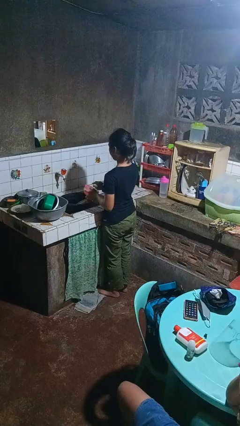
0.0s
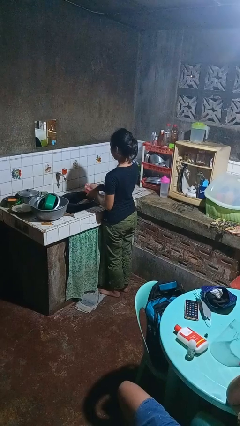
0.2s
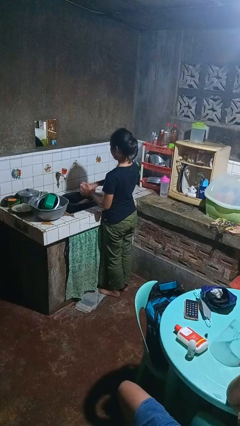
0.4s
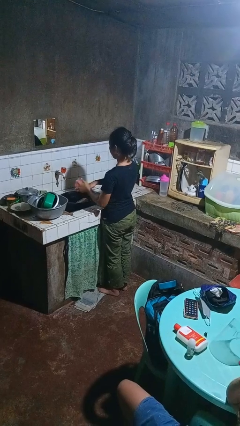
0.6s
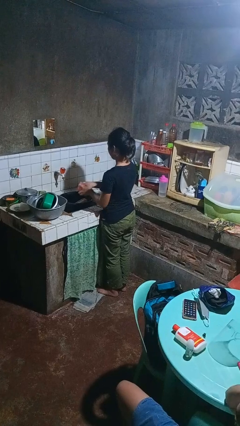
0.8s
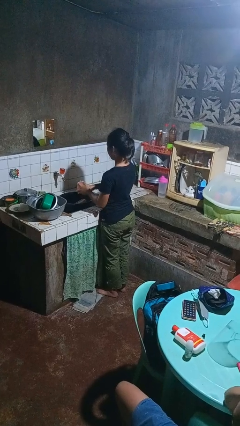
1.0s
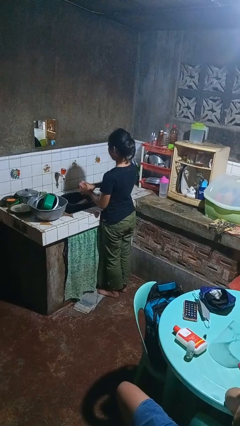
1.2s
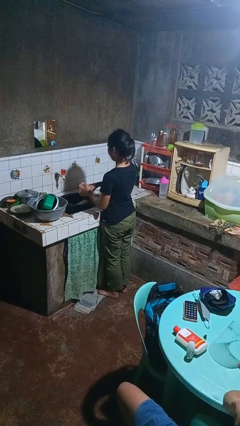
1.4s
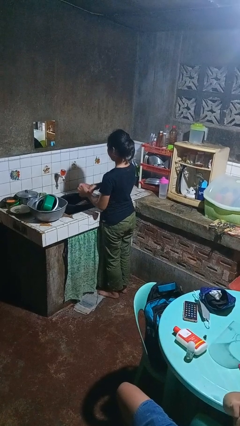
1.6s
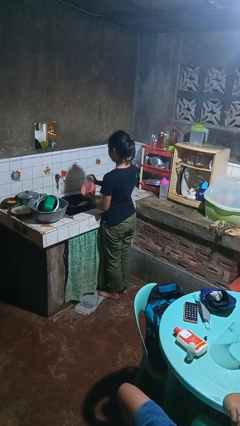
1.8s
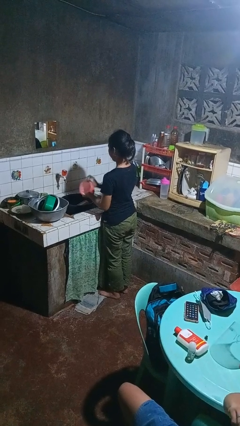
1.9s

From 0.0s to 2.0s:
person washes dish

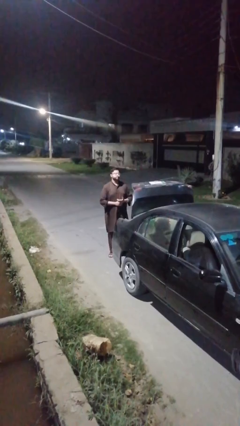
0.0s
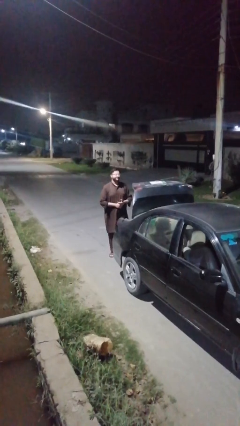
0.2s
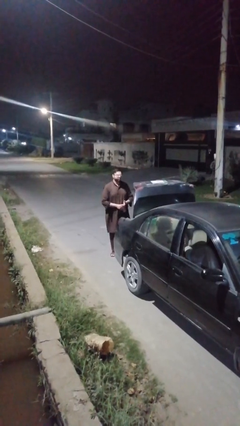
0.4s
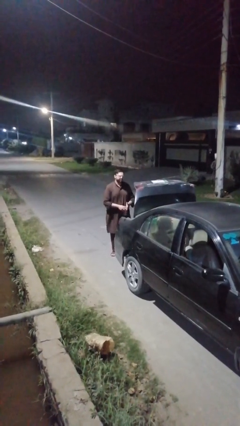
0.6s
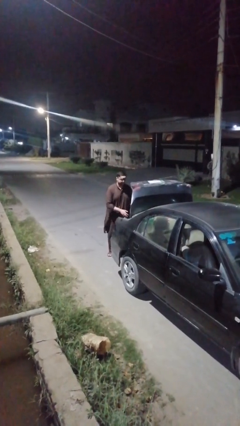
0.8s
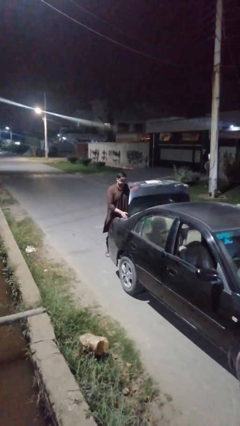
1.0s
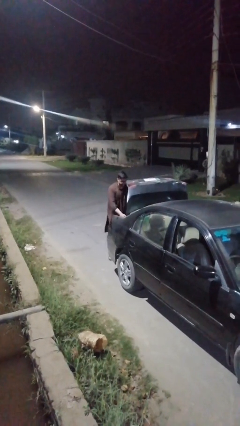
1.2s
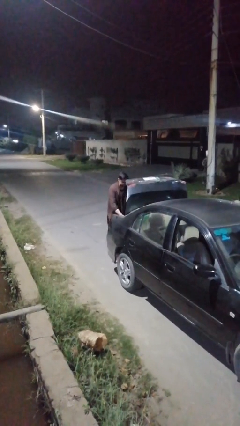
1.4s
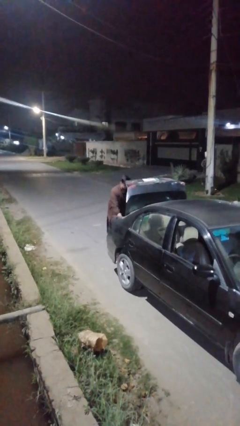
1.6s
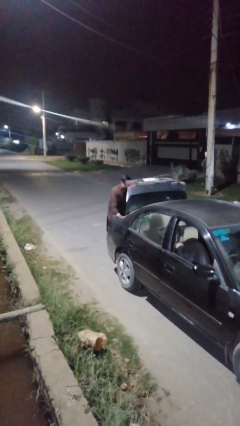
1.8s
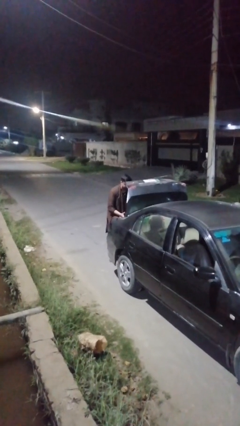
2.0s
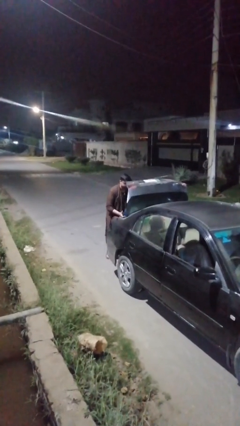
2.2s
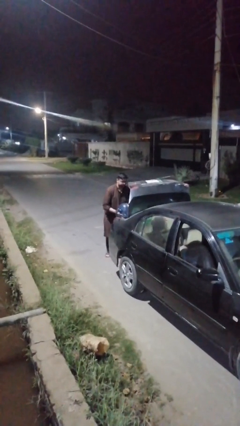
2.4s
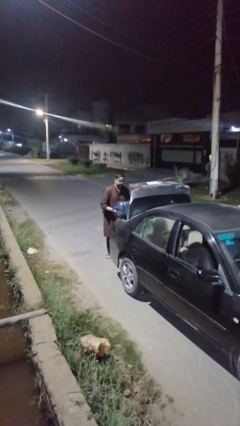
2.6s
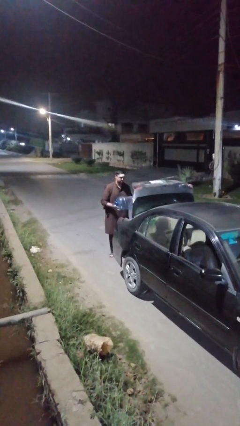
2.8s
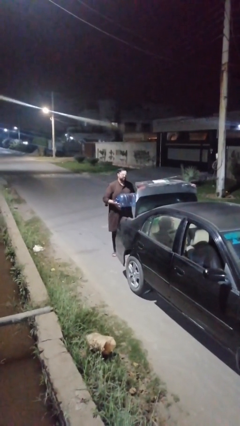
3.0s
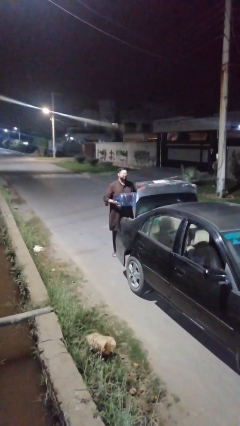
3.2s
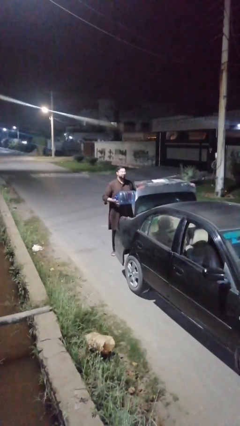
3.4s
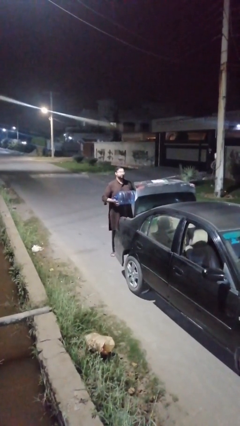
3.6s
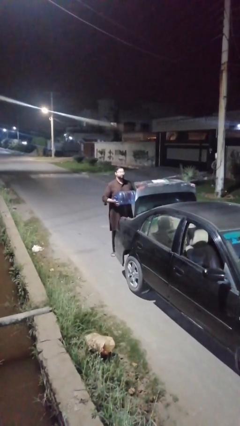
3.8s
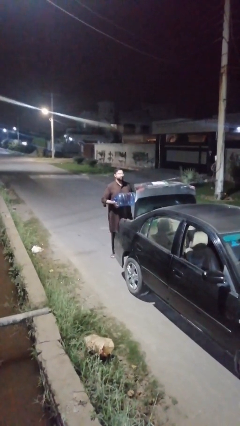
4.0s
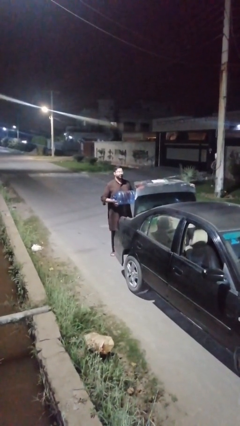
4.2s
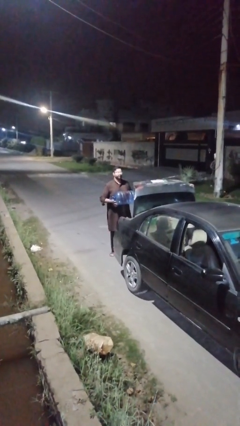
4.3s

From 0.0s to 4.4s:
person unloads car

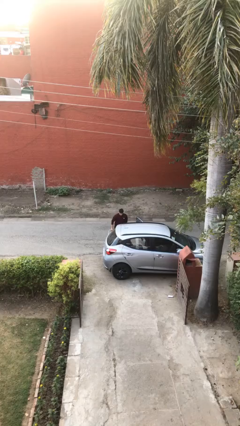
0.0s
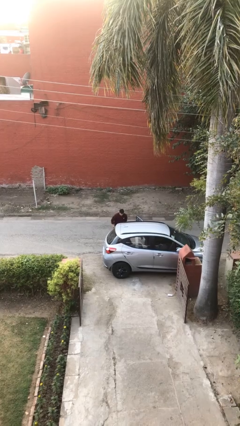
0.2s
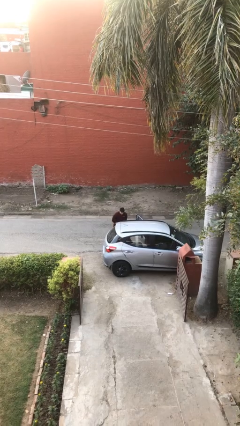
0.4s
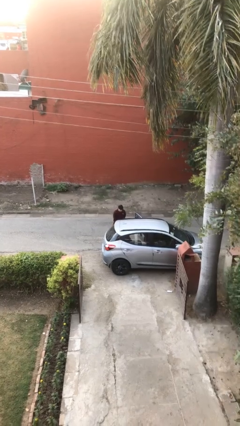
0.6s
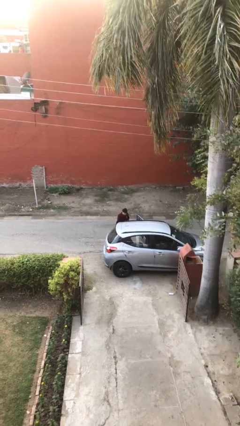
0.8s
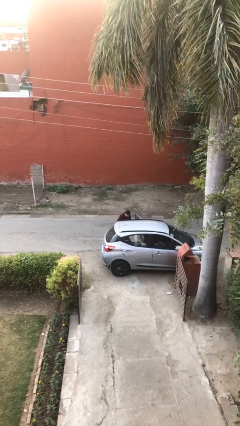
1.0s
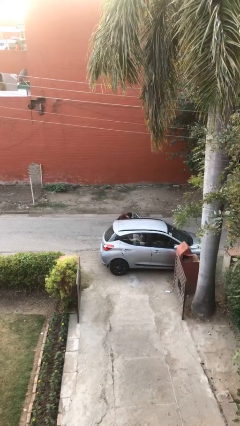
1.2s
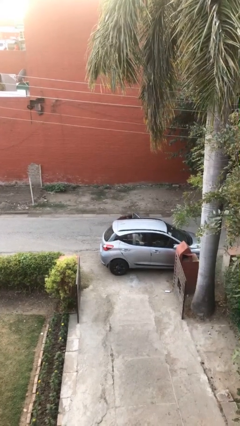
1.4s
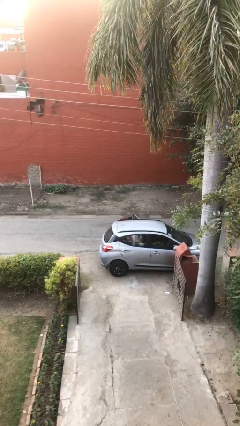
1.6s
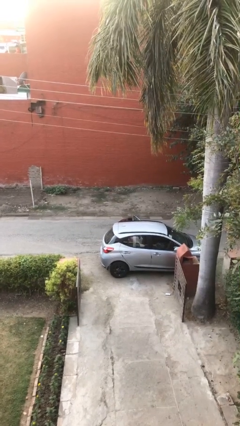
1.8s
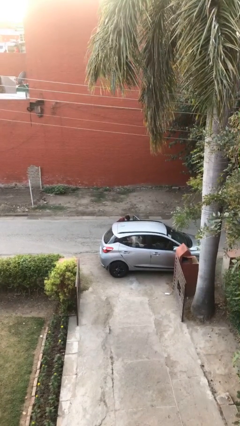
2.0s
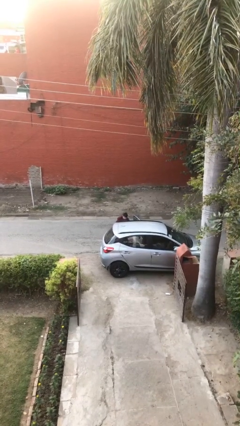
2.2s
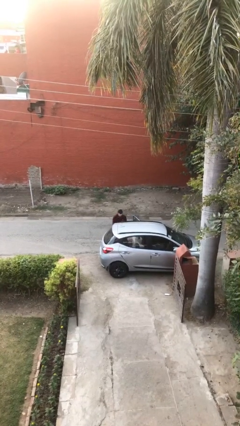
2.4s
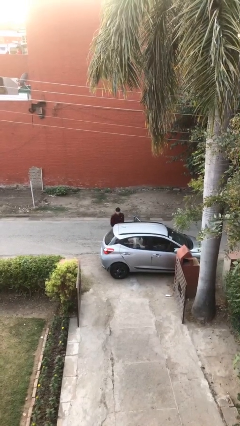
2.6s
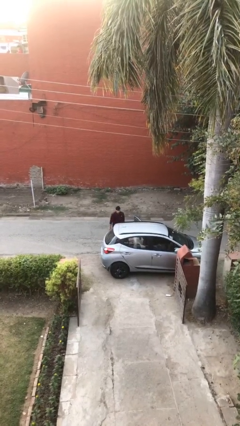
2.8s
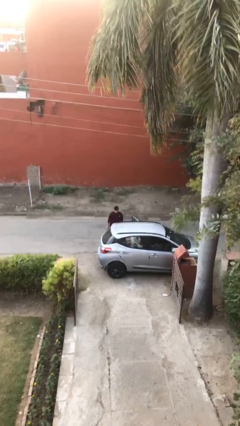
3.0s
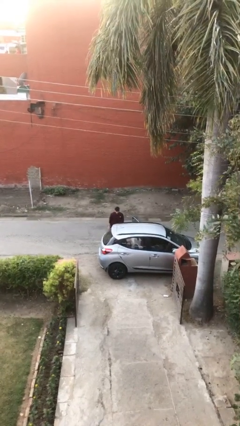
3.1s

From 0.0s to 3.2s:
person loads car

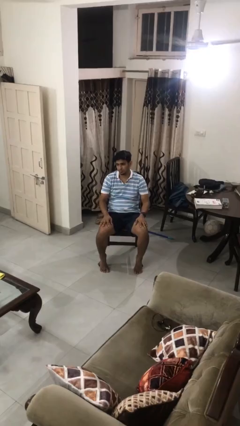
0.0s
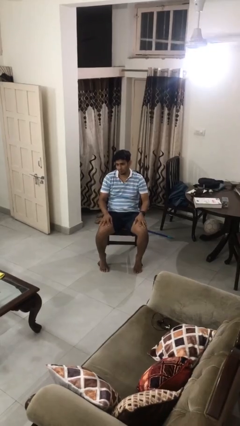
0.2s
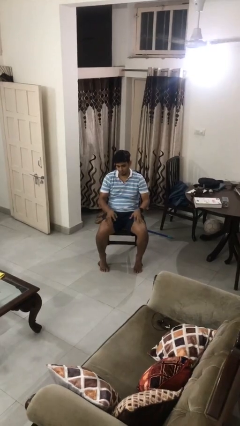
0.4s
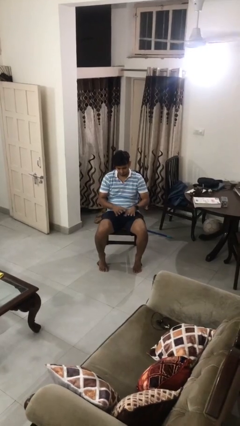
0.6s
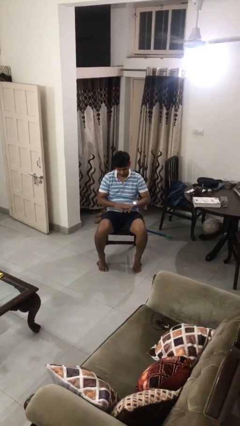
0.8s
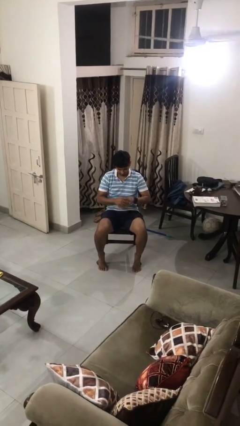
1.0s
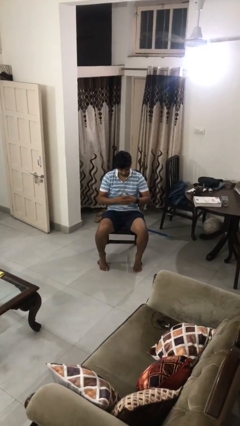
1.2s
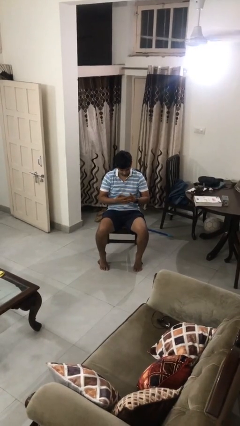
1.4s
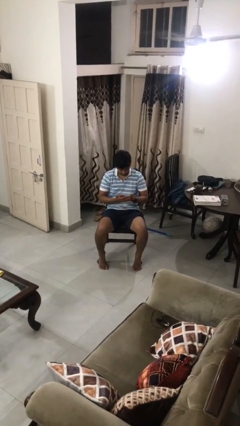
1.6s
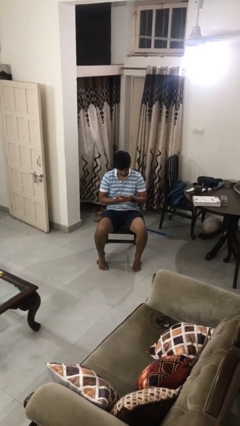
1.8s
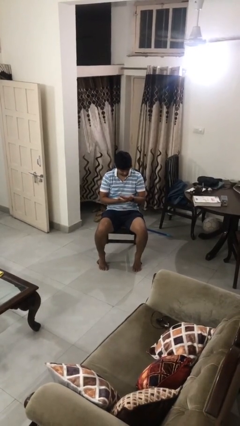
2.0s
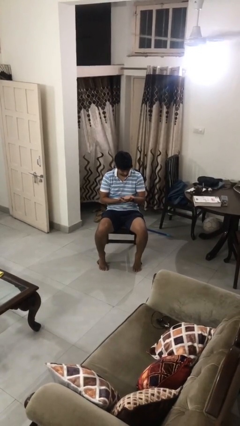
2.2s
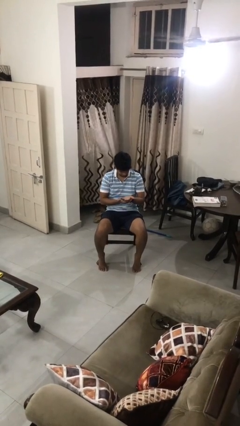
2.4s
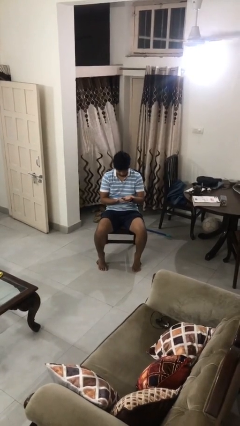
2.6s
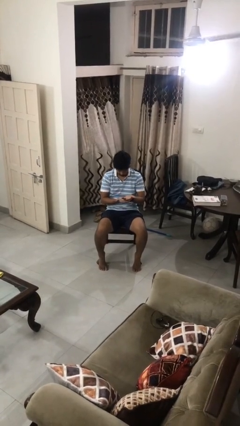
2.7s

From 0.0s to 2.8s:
person looks at hands in lap

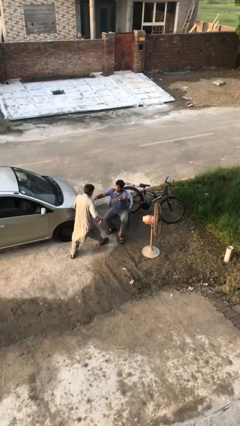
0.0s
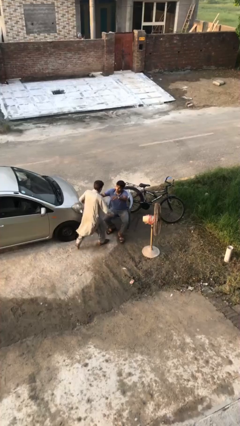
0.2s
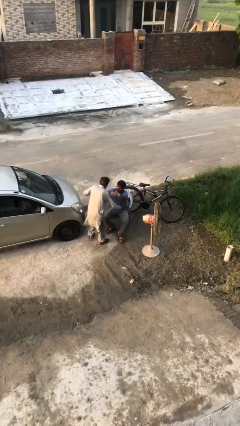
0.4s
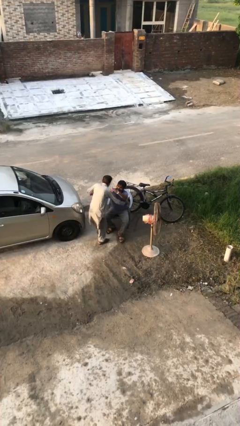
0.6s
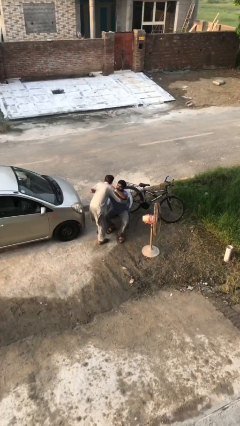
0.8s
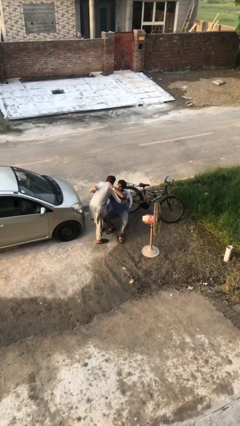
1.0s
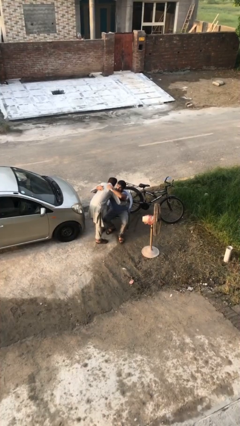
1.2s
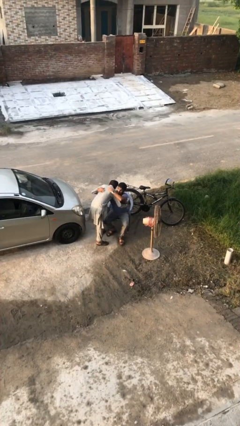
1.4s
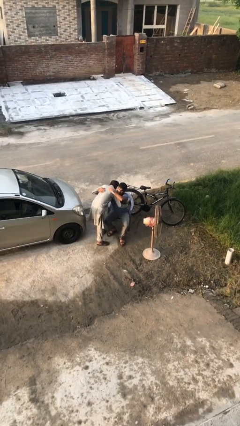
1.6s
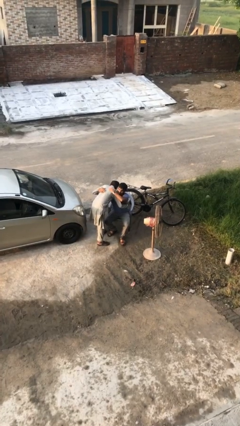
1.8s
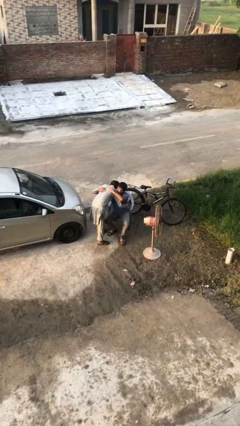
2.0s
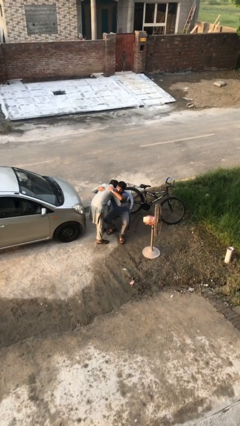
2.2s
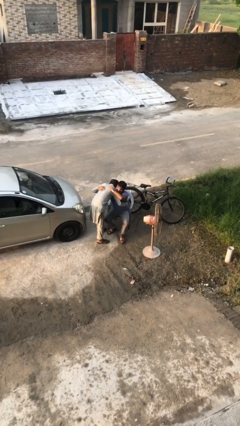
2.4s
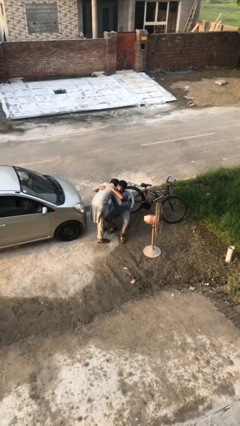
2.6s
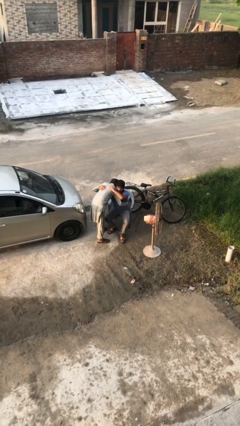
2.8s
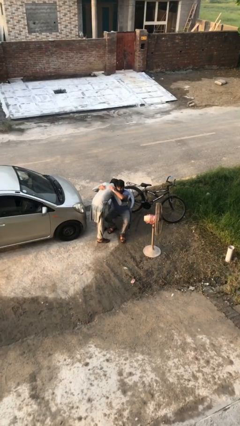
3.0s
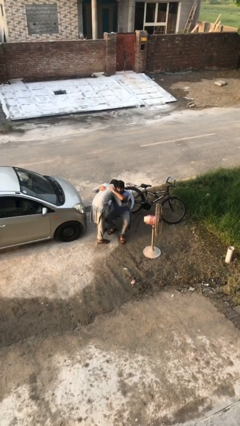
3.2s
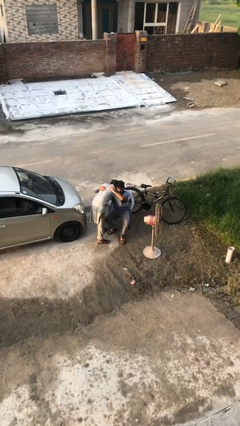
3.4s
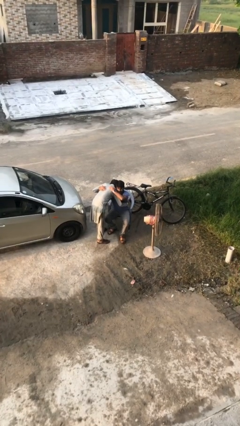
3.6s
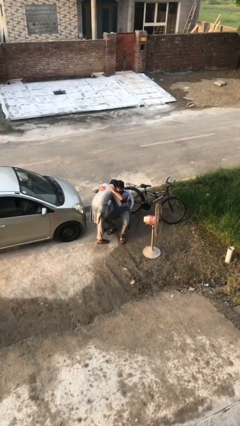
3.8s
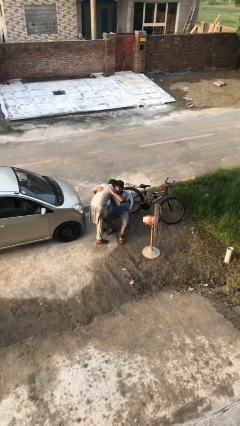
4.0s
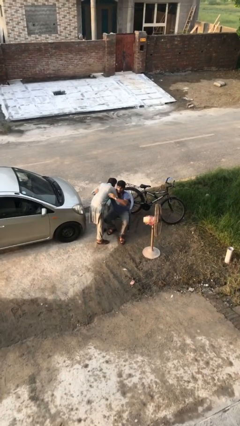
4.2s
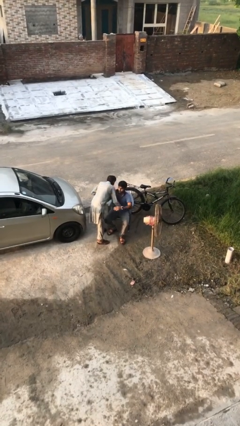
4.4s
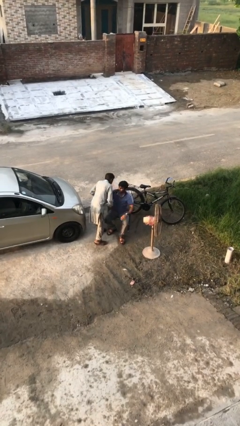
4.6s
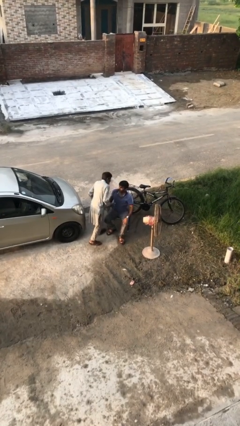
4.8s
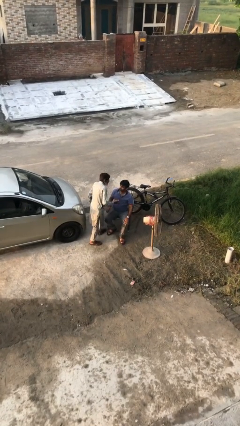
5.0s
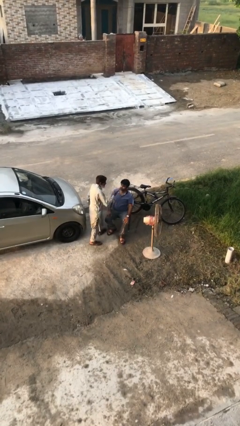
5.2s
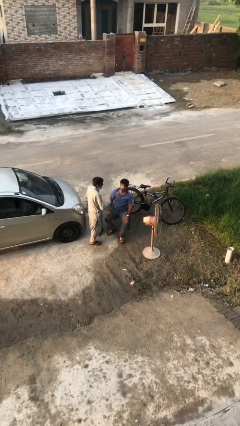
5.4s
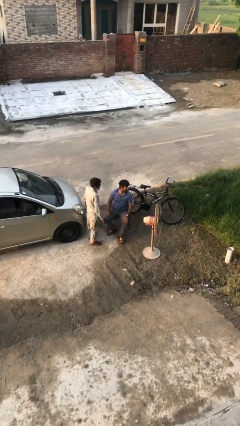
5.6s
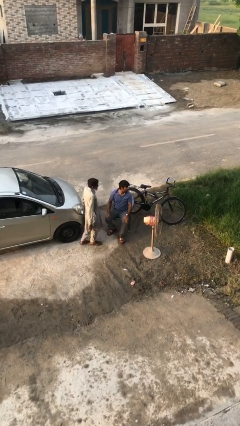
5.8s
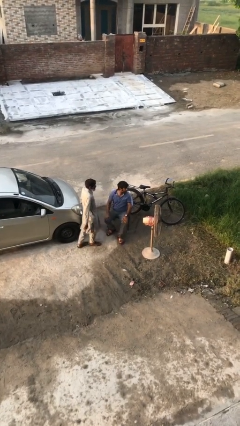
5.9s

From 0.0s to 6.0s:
person embraces person
